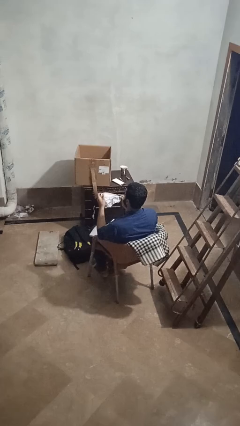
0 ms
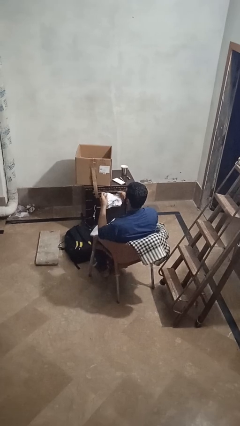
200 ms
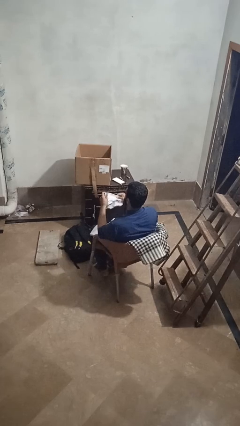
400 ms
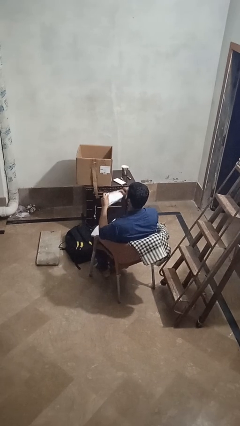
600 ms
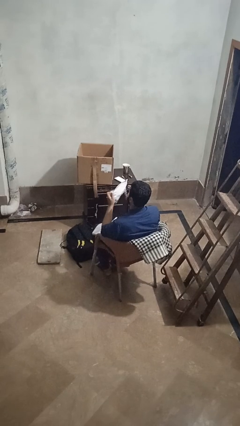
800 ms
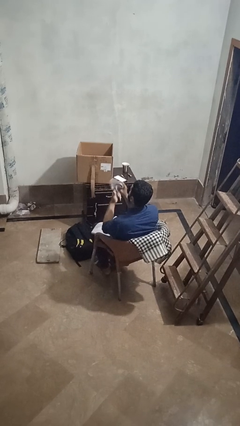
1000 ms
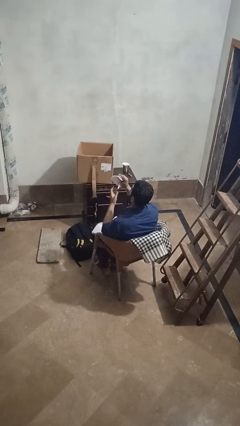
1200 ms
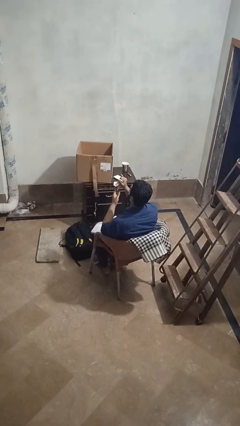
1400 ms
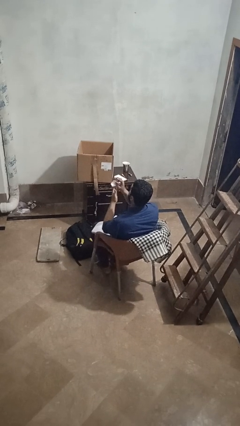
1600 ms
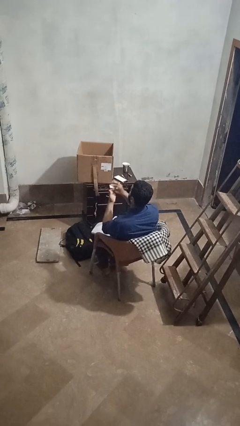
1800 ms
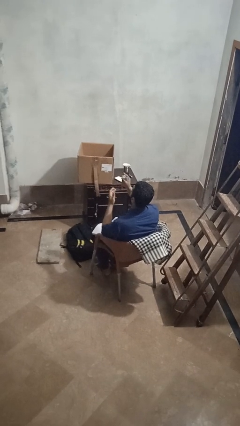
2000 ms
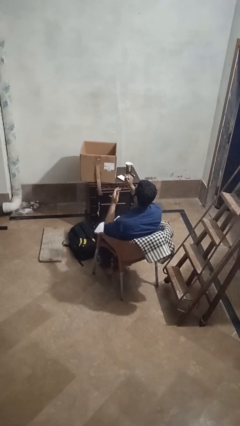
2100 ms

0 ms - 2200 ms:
person crumples paper

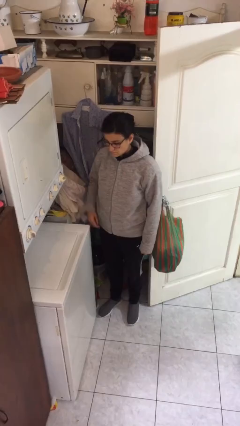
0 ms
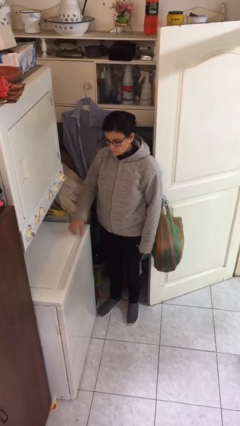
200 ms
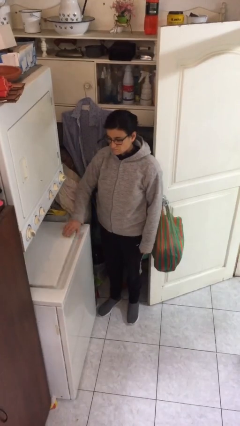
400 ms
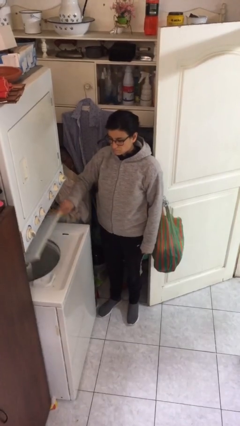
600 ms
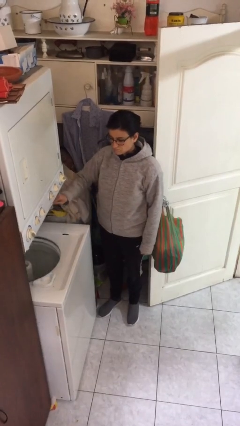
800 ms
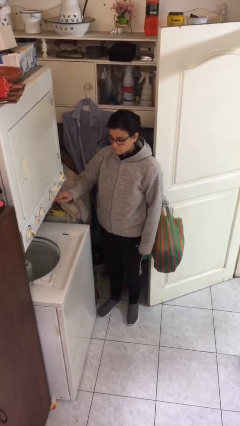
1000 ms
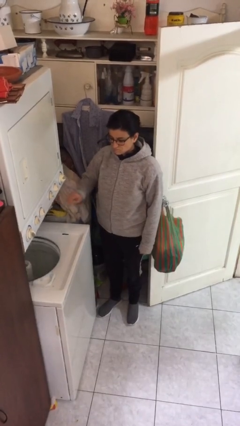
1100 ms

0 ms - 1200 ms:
person opens clothes washer

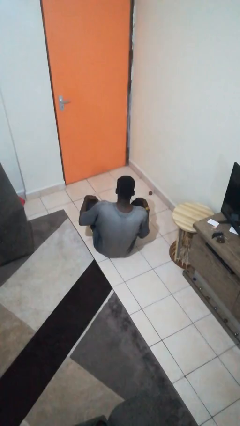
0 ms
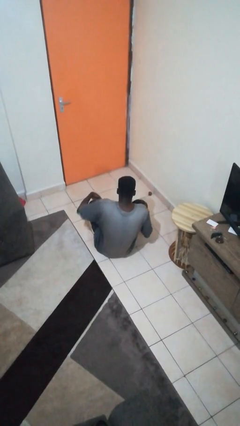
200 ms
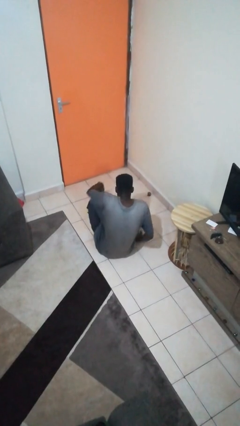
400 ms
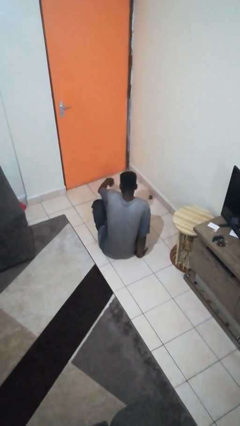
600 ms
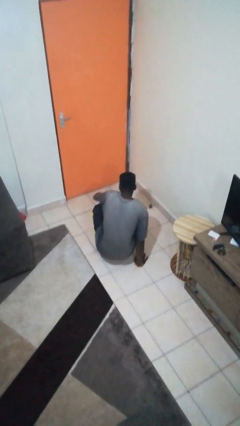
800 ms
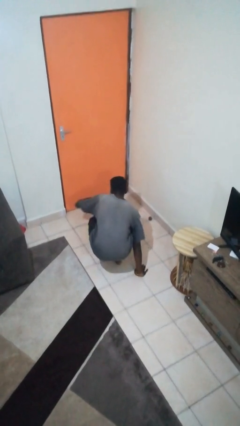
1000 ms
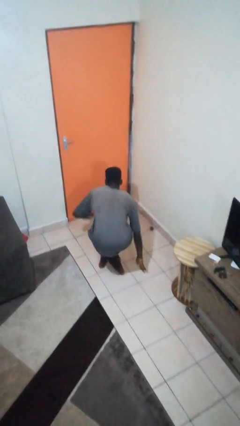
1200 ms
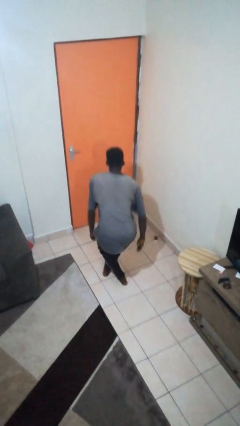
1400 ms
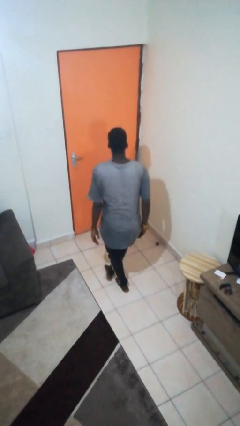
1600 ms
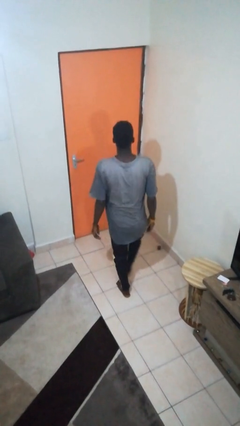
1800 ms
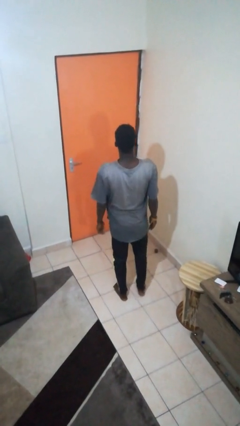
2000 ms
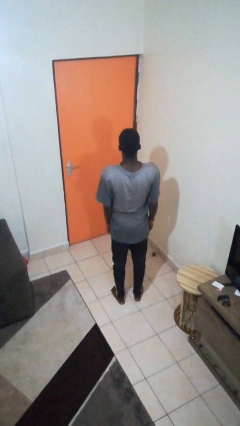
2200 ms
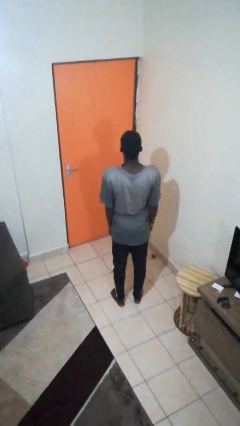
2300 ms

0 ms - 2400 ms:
person stands up from floor

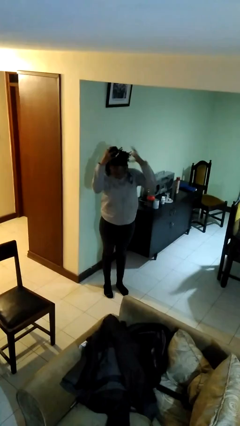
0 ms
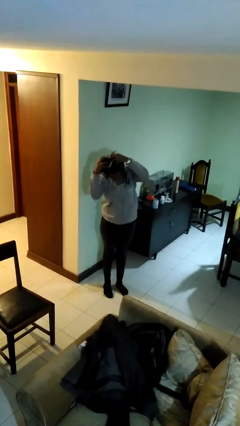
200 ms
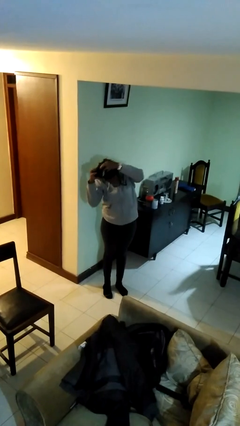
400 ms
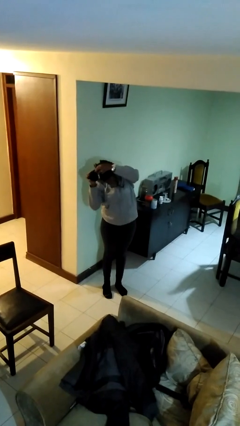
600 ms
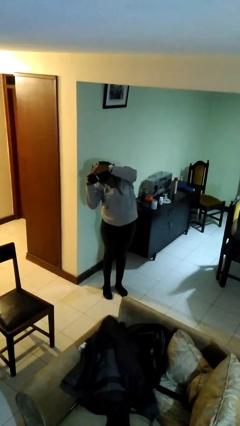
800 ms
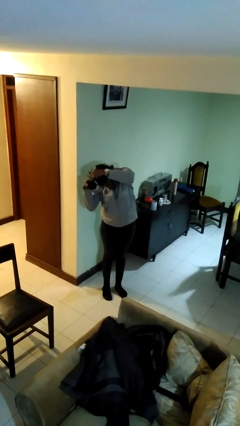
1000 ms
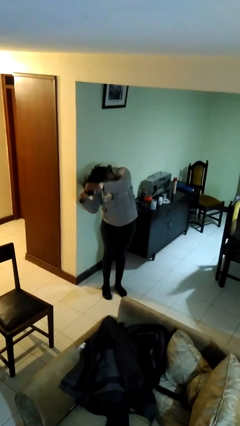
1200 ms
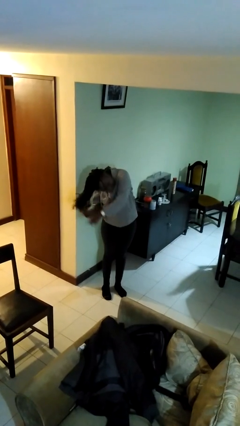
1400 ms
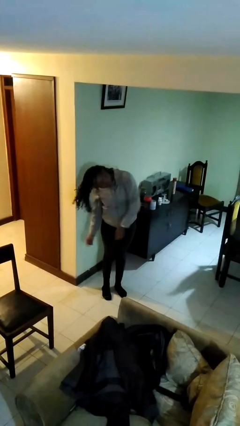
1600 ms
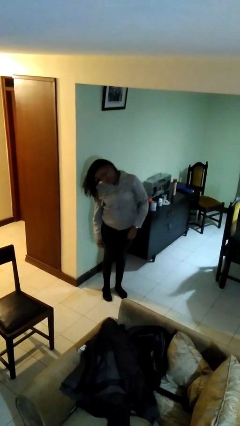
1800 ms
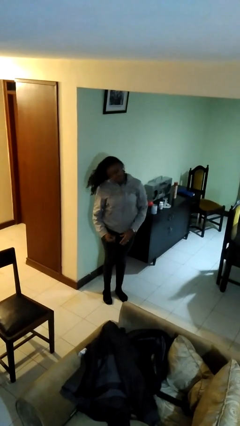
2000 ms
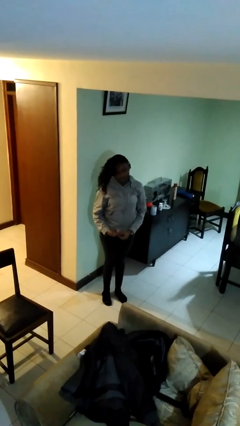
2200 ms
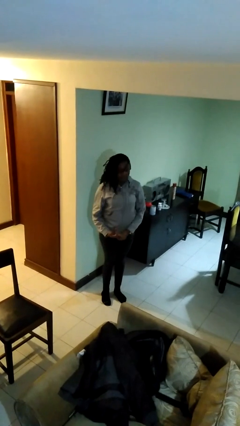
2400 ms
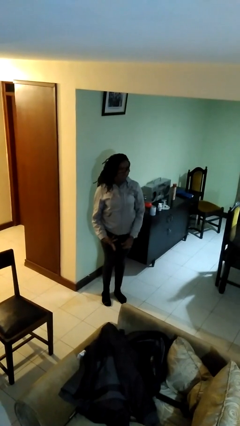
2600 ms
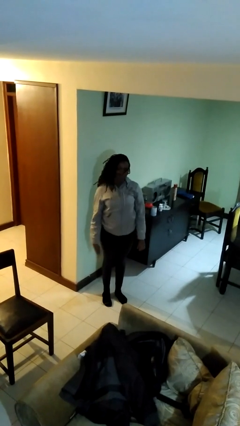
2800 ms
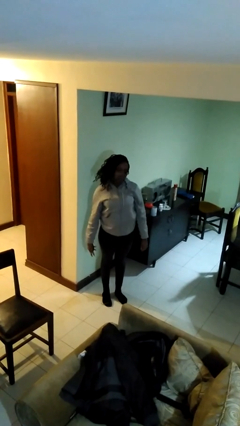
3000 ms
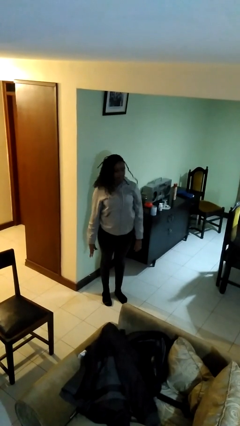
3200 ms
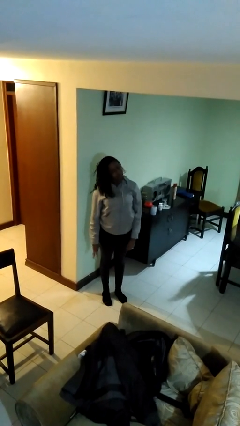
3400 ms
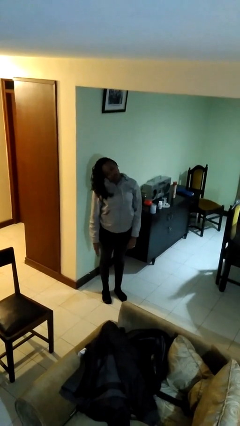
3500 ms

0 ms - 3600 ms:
person takes off hairtie

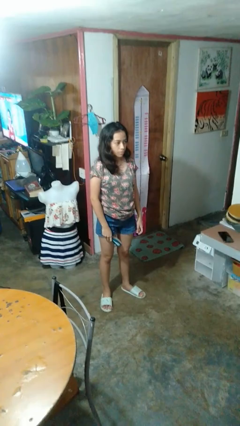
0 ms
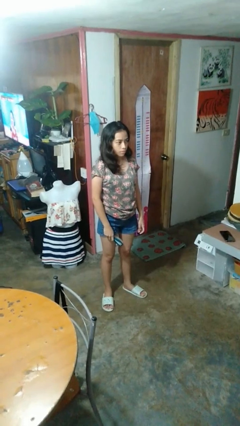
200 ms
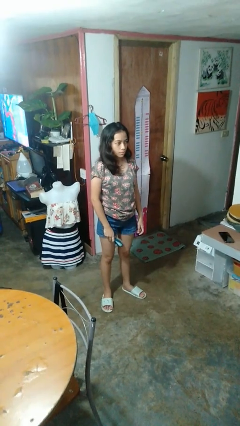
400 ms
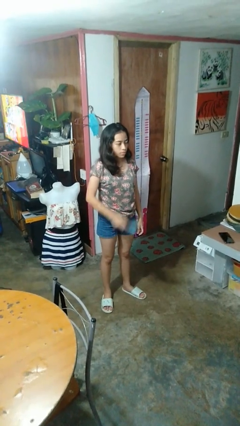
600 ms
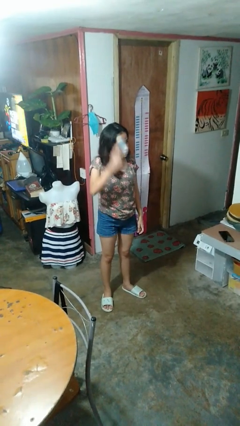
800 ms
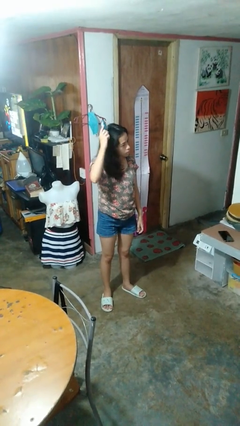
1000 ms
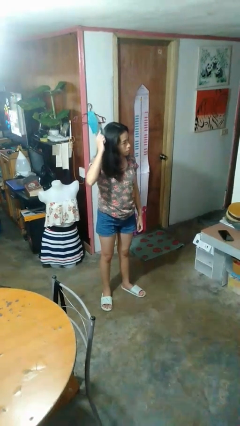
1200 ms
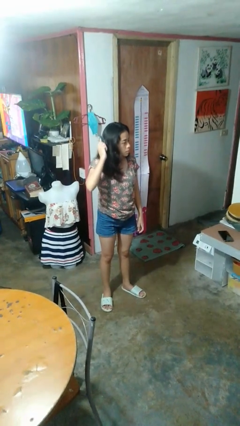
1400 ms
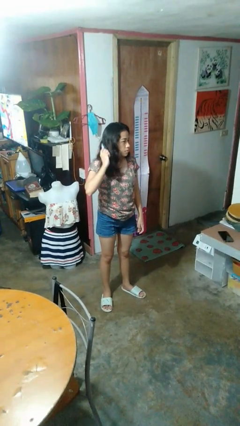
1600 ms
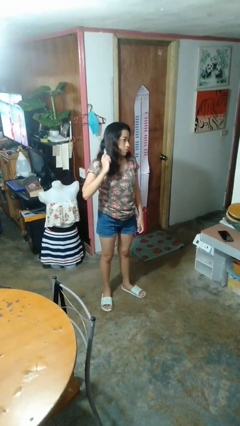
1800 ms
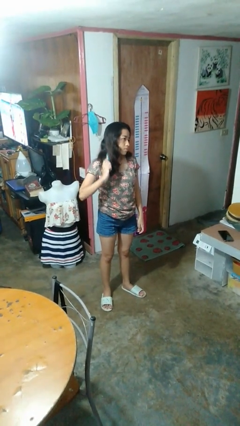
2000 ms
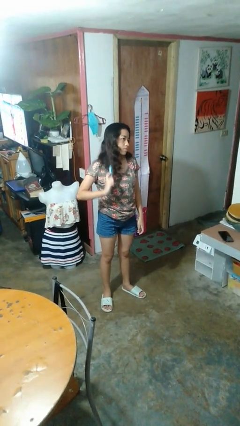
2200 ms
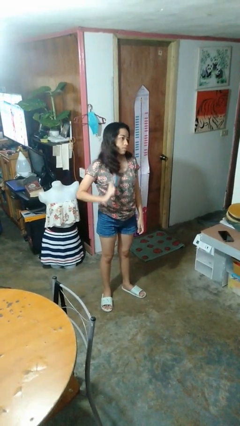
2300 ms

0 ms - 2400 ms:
person brushes hair

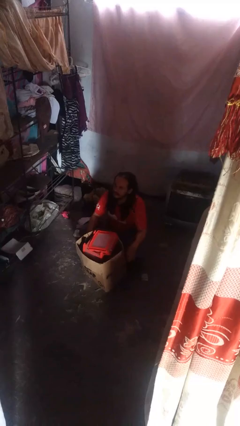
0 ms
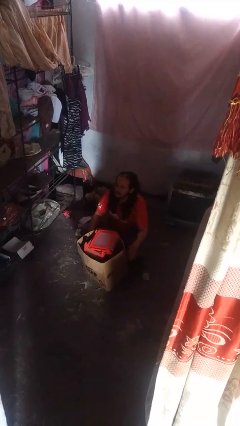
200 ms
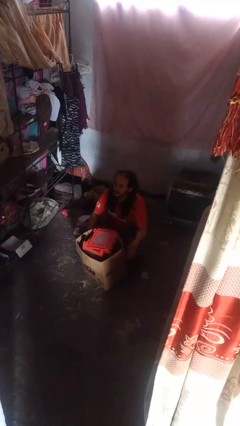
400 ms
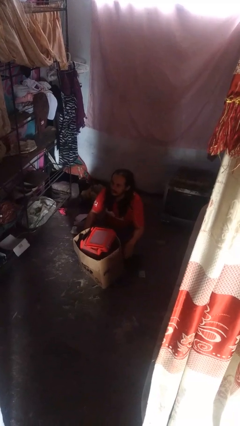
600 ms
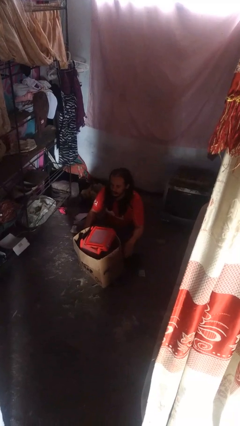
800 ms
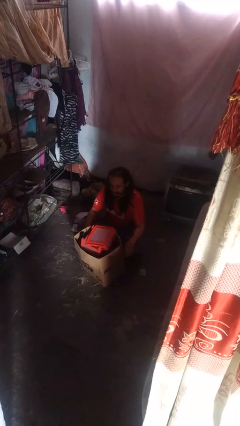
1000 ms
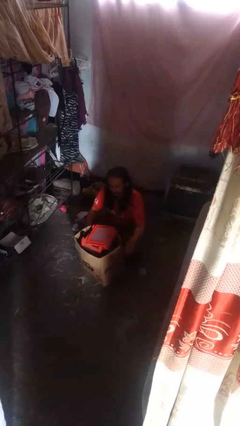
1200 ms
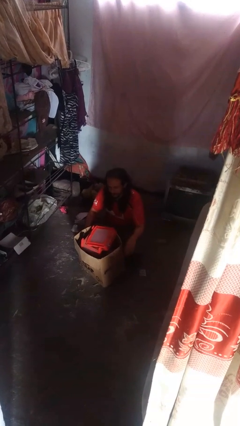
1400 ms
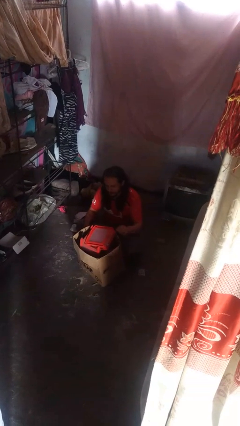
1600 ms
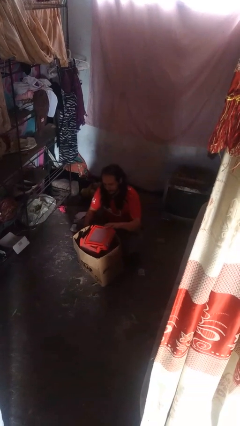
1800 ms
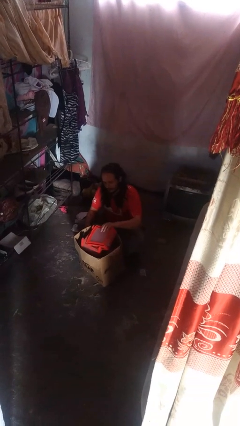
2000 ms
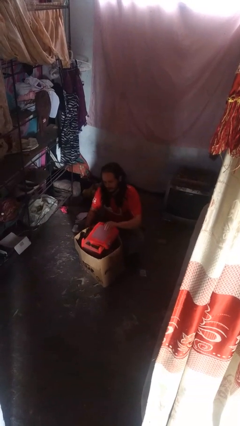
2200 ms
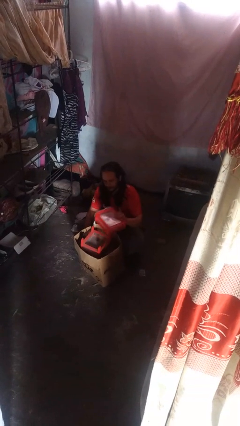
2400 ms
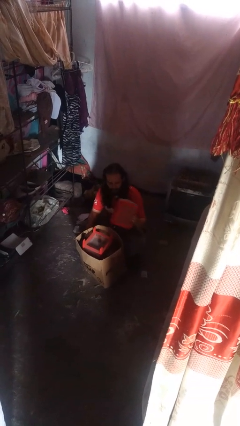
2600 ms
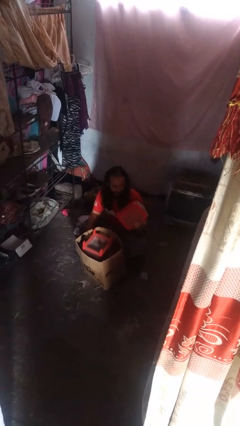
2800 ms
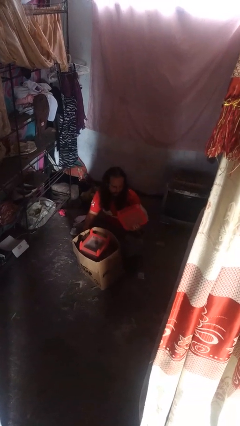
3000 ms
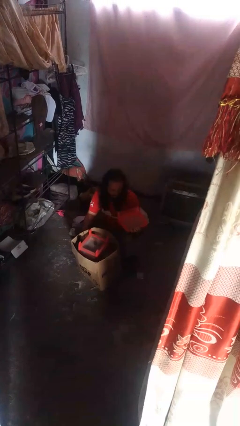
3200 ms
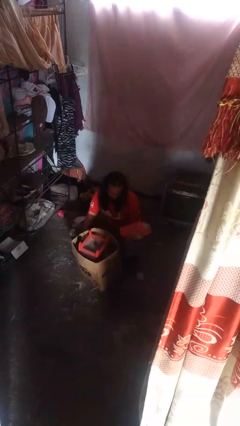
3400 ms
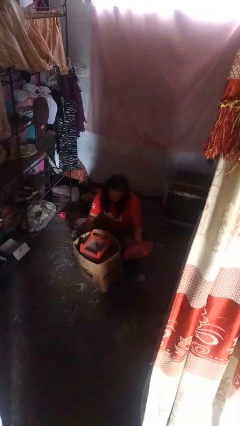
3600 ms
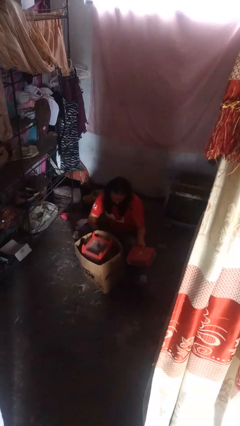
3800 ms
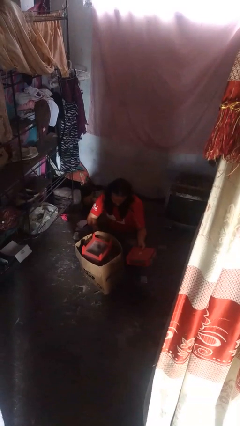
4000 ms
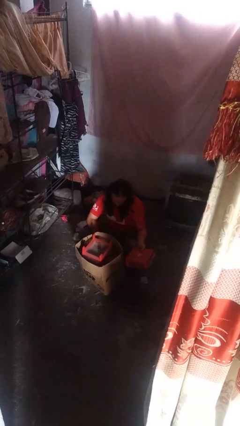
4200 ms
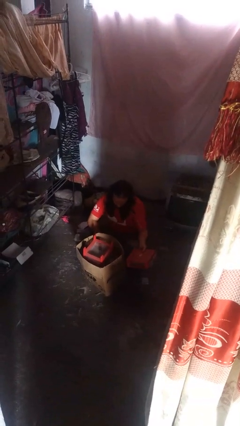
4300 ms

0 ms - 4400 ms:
person takes object from box

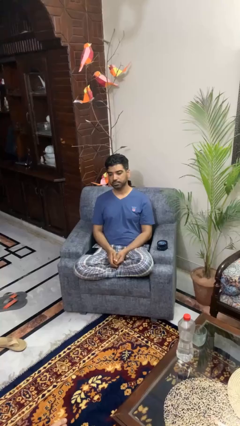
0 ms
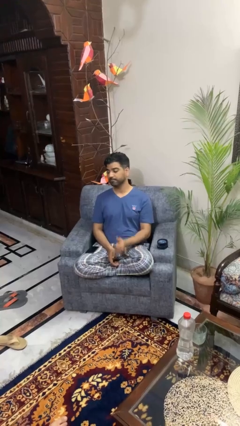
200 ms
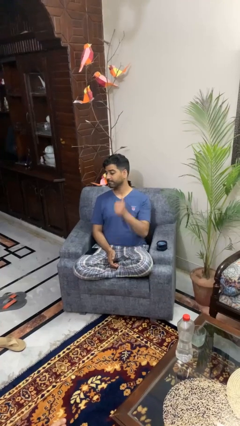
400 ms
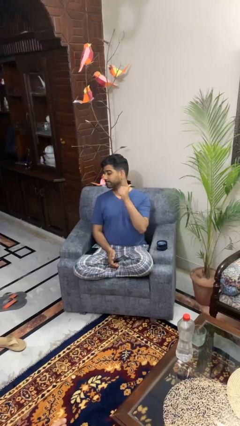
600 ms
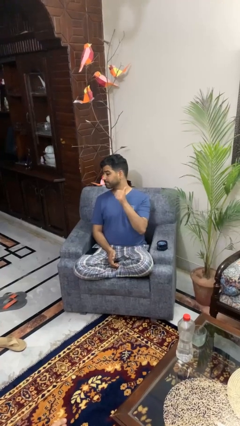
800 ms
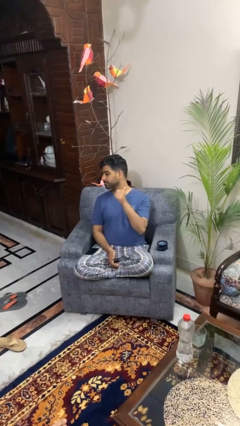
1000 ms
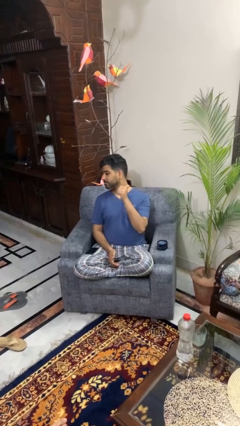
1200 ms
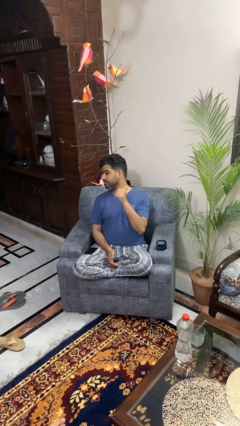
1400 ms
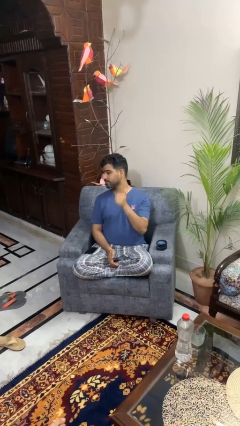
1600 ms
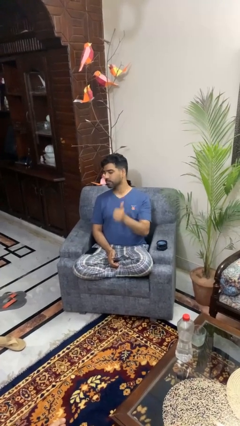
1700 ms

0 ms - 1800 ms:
person gestures behind me
